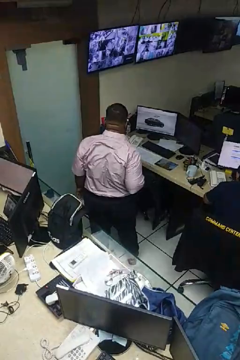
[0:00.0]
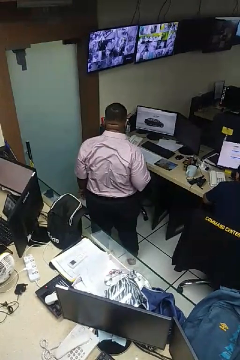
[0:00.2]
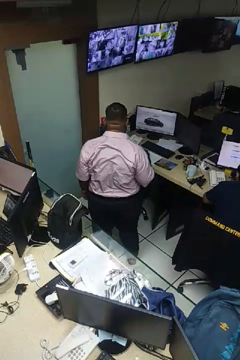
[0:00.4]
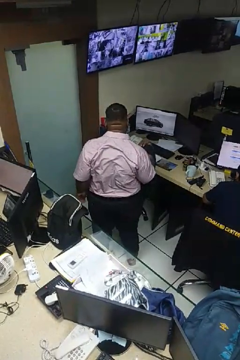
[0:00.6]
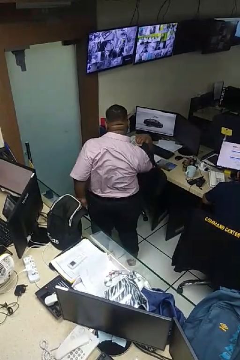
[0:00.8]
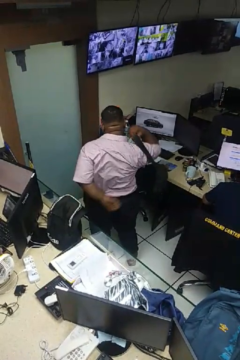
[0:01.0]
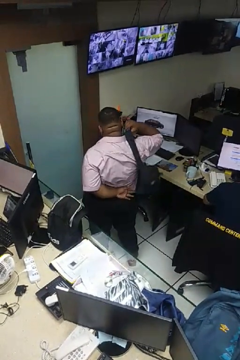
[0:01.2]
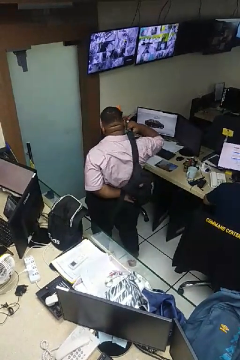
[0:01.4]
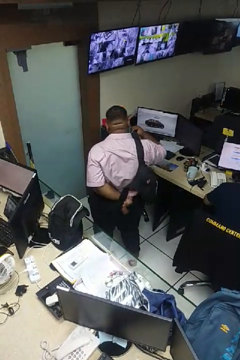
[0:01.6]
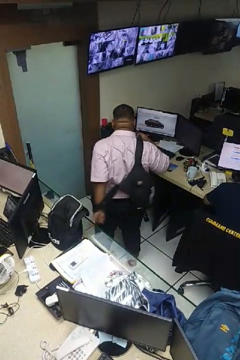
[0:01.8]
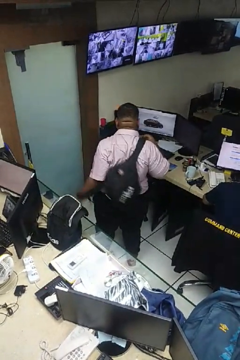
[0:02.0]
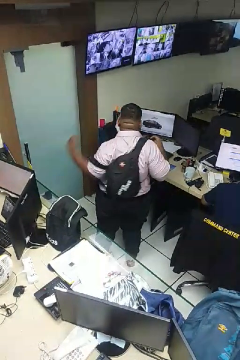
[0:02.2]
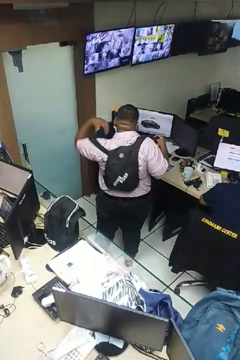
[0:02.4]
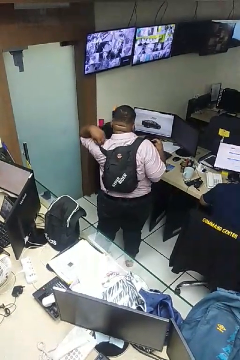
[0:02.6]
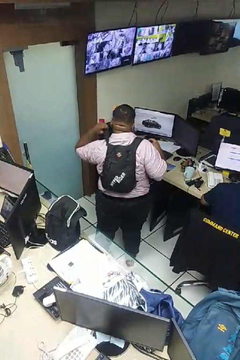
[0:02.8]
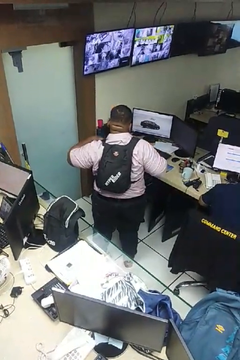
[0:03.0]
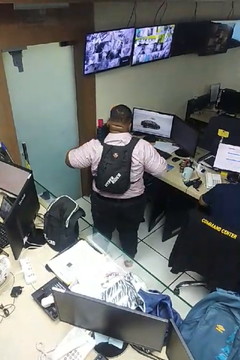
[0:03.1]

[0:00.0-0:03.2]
person puts on backpack

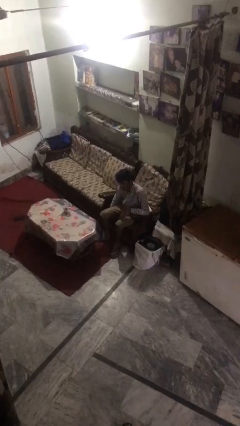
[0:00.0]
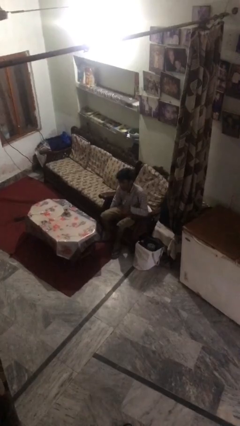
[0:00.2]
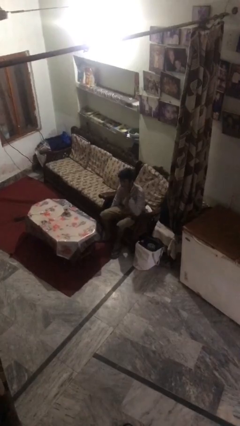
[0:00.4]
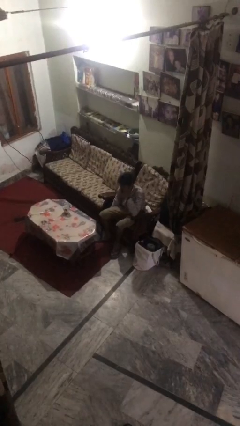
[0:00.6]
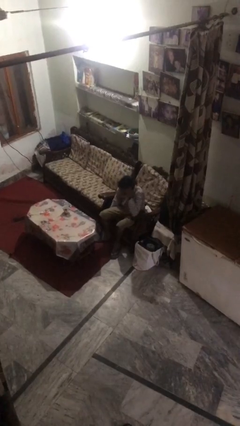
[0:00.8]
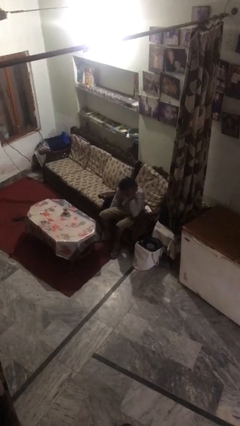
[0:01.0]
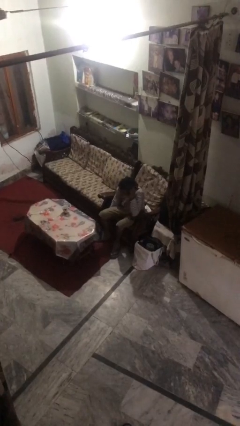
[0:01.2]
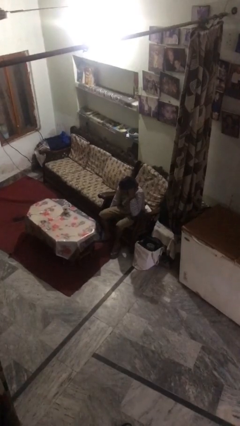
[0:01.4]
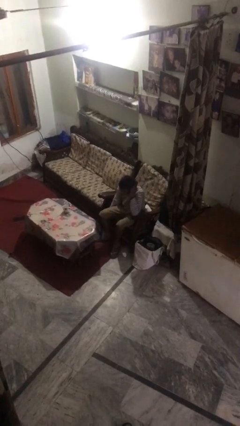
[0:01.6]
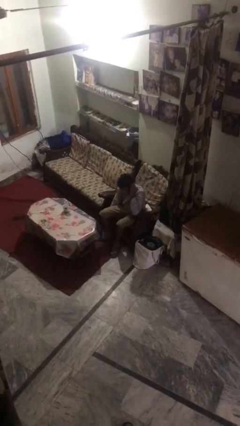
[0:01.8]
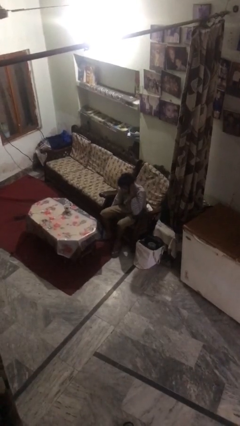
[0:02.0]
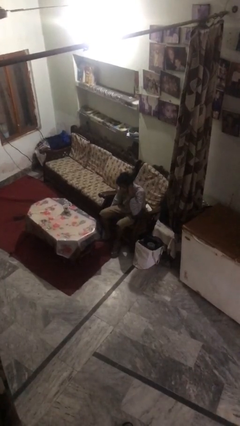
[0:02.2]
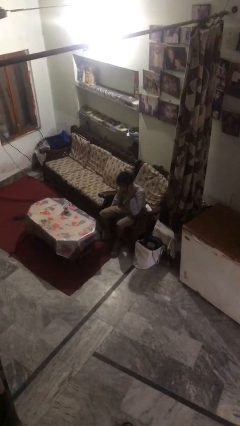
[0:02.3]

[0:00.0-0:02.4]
person strokes hair

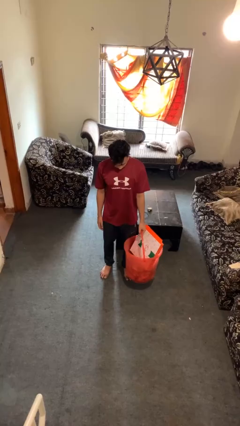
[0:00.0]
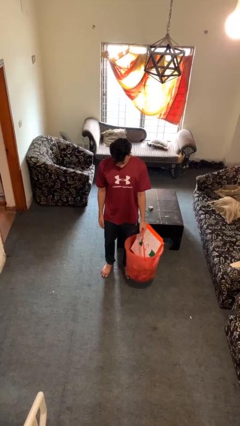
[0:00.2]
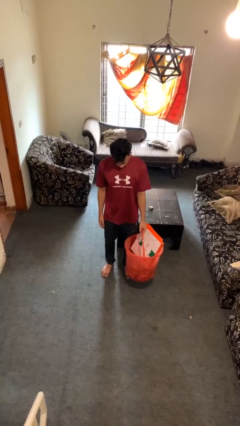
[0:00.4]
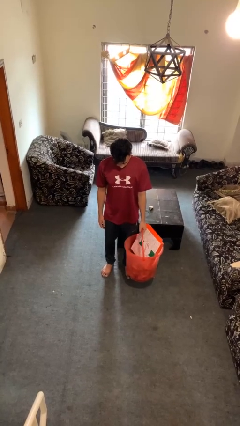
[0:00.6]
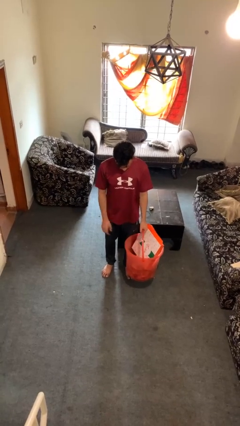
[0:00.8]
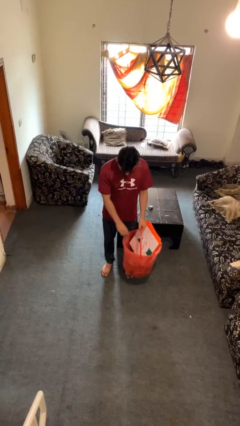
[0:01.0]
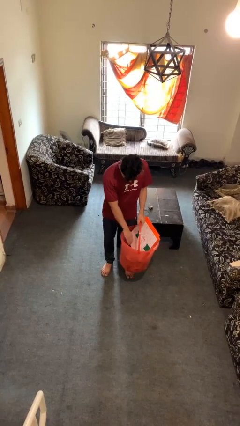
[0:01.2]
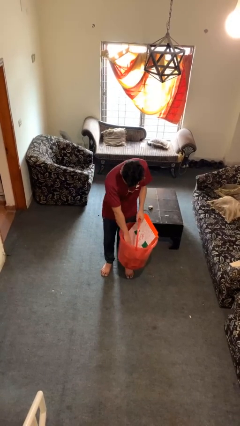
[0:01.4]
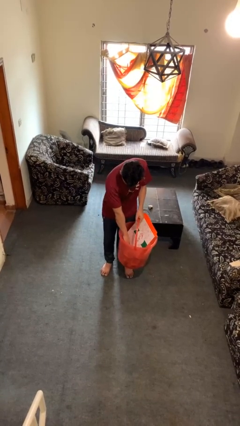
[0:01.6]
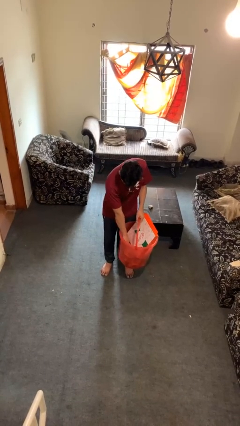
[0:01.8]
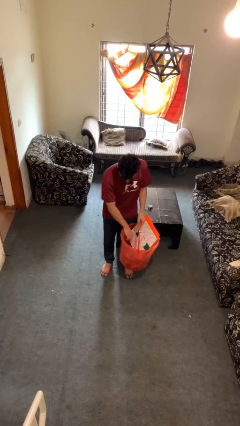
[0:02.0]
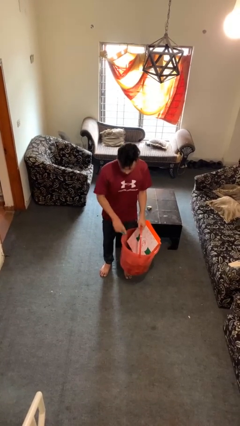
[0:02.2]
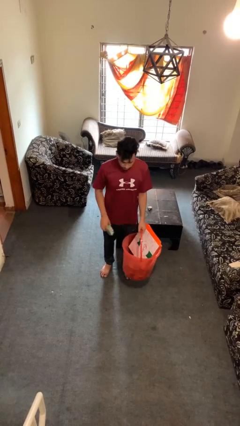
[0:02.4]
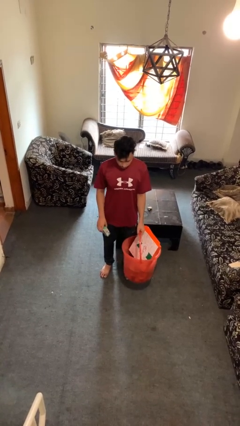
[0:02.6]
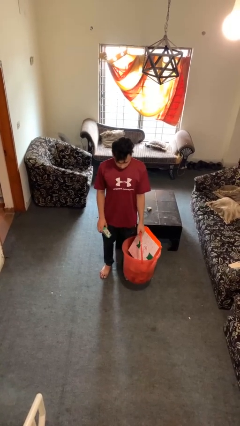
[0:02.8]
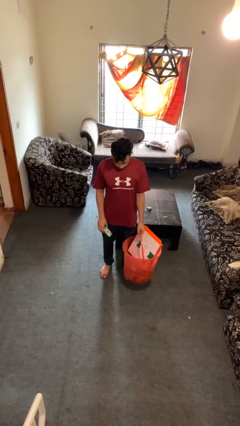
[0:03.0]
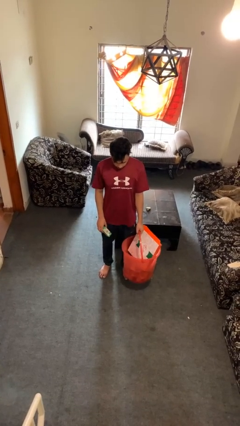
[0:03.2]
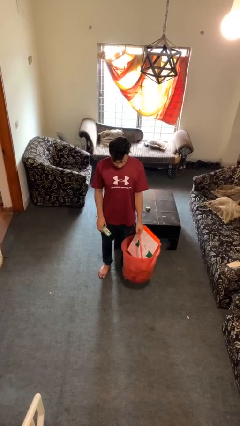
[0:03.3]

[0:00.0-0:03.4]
person takes object from basket

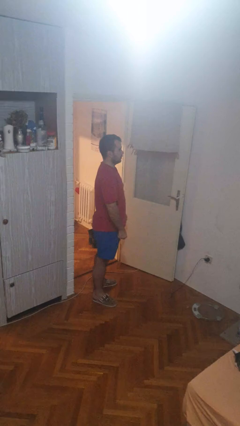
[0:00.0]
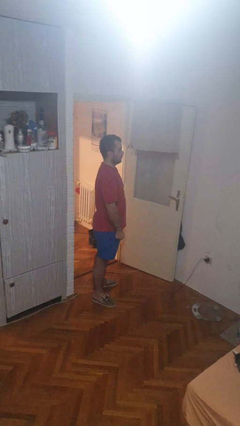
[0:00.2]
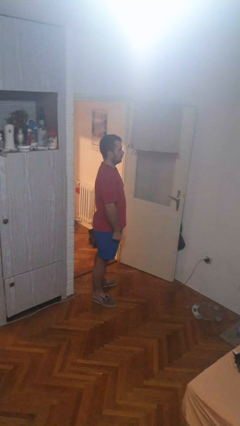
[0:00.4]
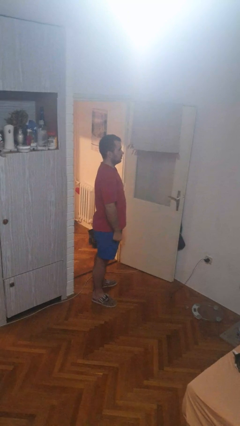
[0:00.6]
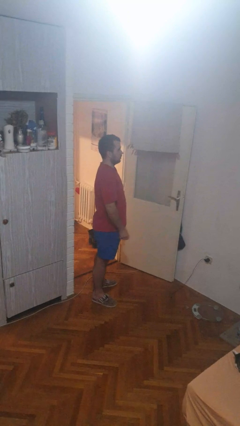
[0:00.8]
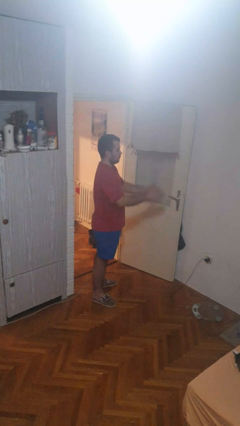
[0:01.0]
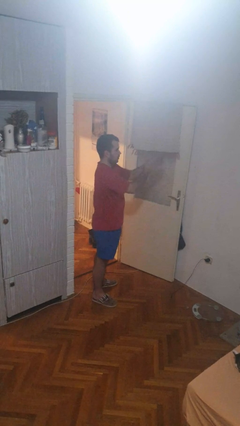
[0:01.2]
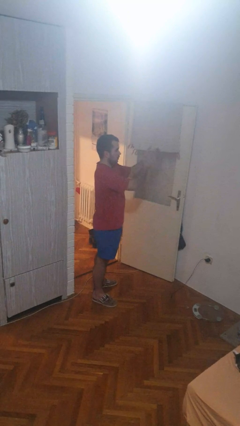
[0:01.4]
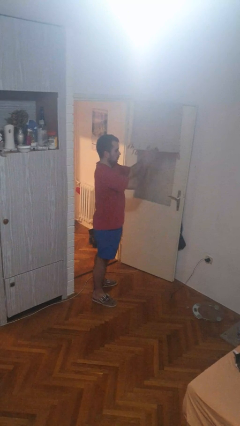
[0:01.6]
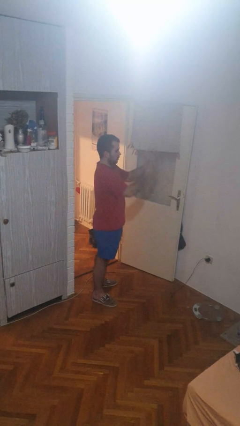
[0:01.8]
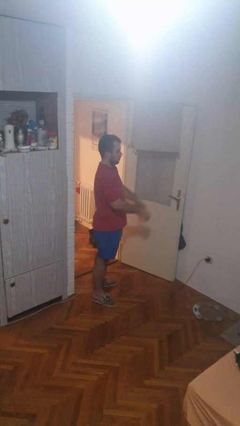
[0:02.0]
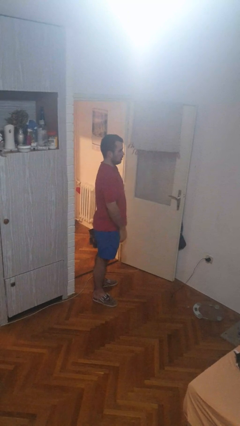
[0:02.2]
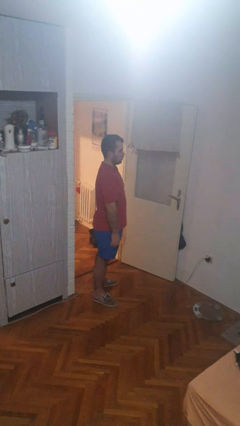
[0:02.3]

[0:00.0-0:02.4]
person claps hands

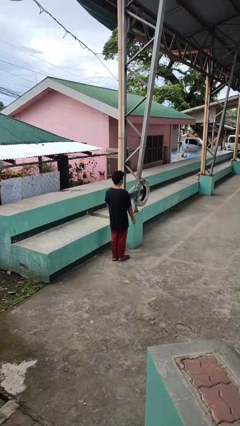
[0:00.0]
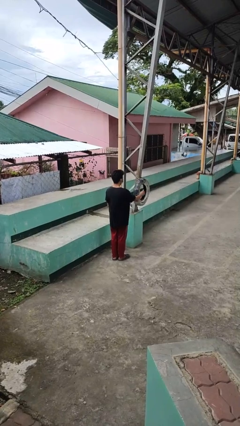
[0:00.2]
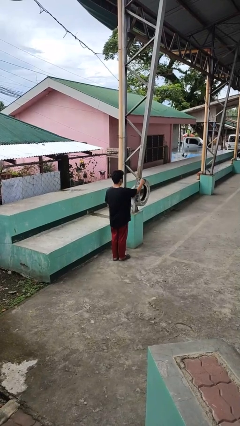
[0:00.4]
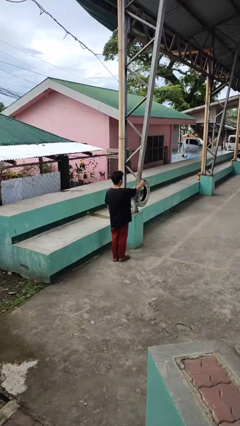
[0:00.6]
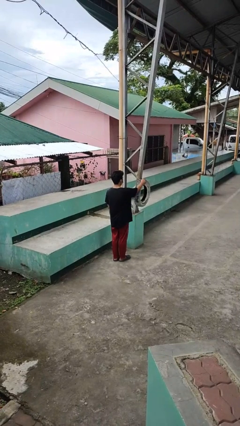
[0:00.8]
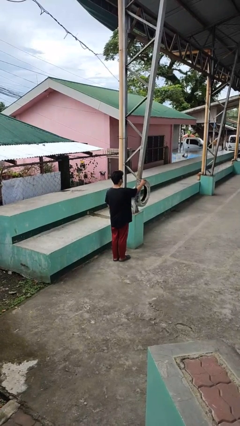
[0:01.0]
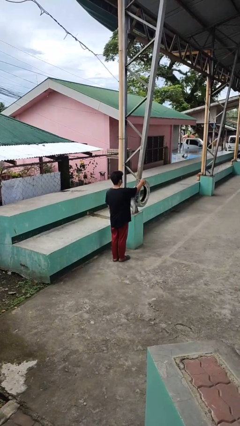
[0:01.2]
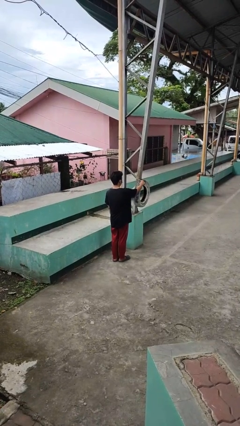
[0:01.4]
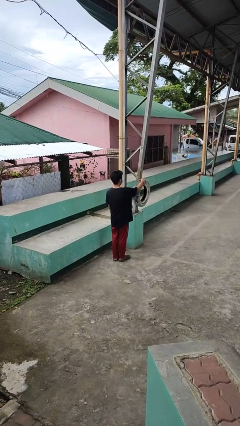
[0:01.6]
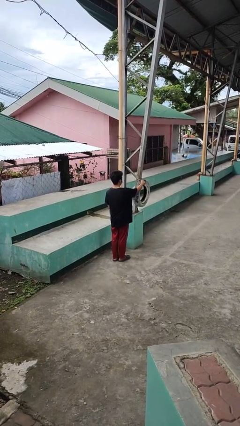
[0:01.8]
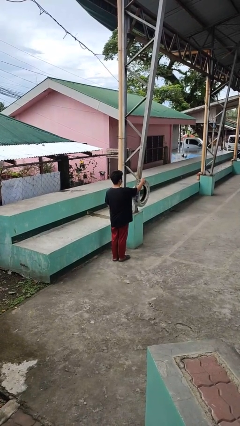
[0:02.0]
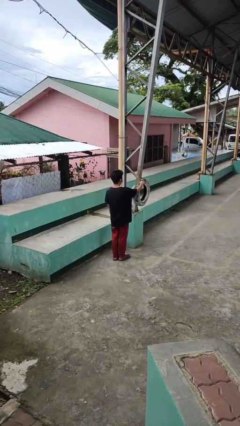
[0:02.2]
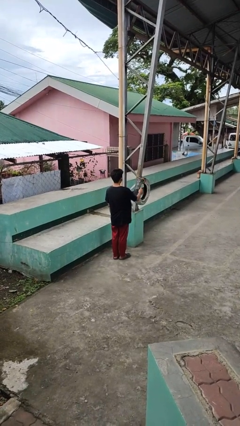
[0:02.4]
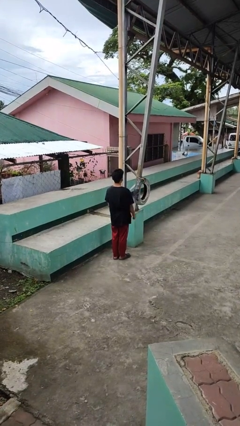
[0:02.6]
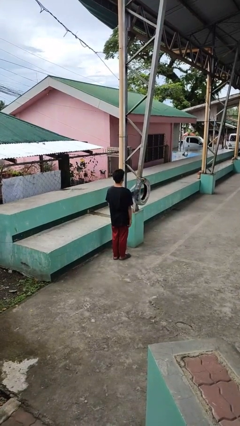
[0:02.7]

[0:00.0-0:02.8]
person taps object with finger

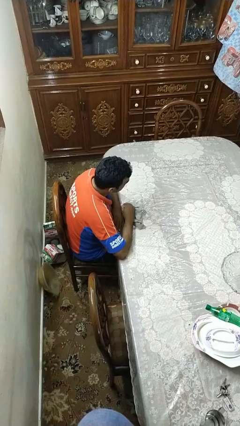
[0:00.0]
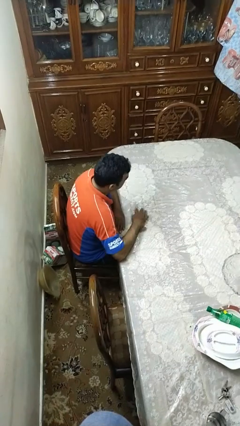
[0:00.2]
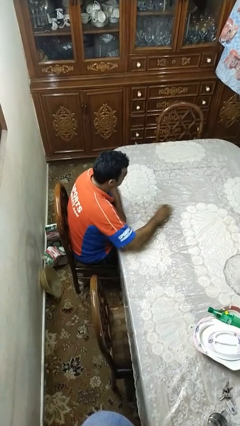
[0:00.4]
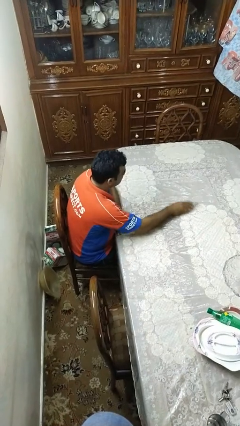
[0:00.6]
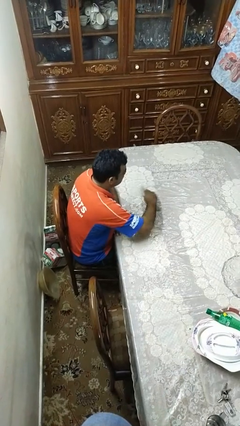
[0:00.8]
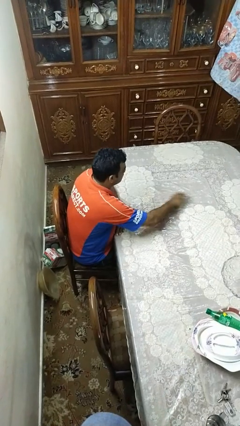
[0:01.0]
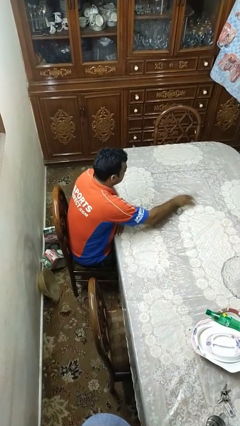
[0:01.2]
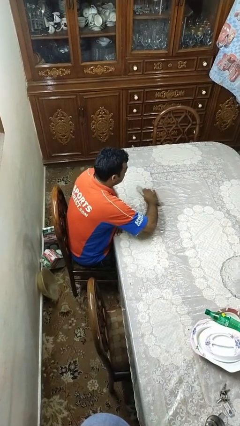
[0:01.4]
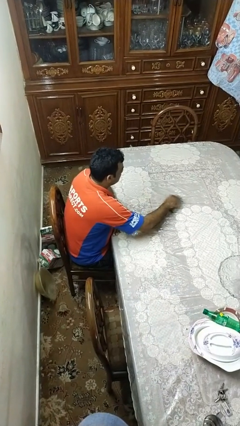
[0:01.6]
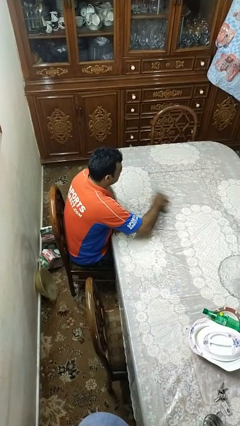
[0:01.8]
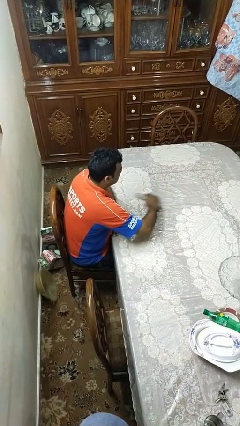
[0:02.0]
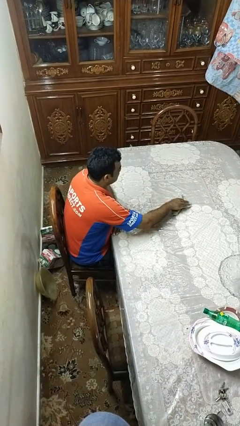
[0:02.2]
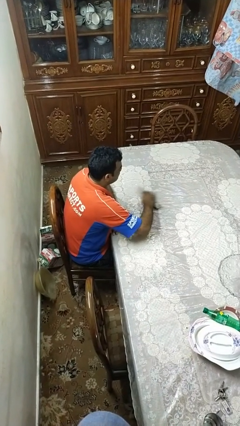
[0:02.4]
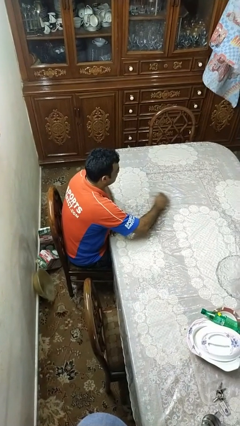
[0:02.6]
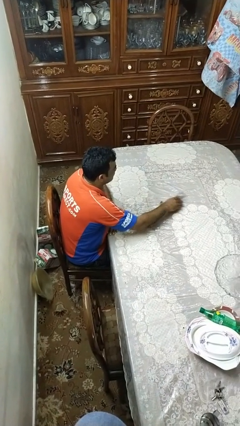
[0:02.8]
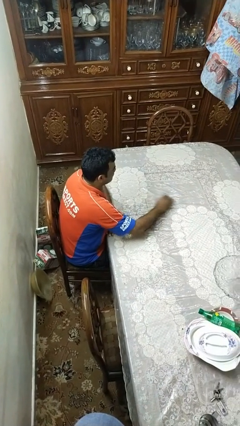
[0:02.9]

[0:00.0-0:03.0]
person cleans table with rag

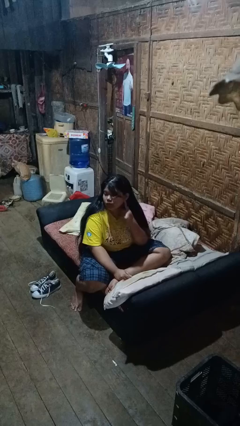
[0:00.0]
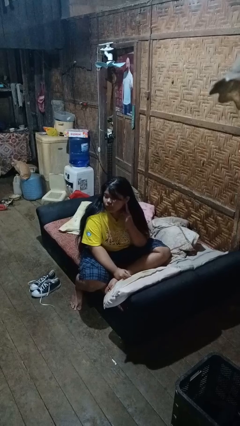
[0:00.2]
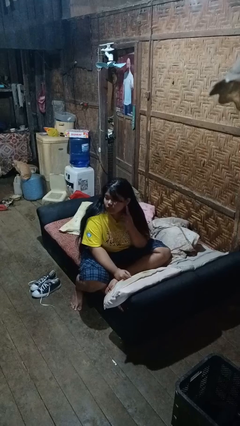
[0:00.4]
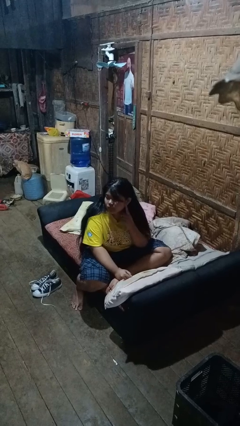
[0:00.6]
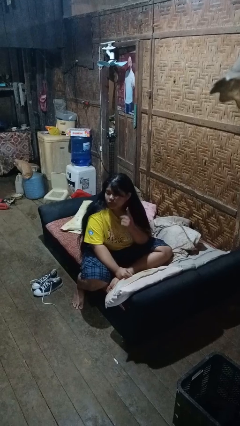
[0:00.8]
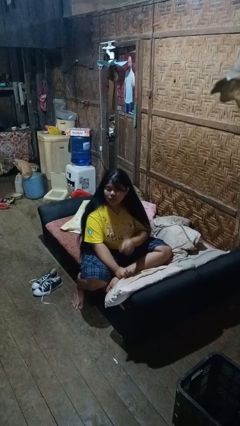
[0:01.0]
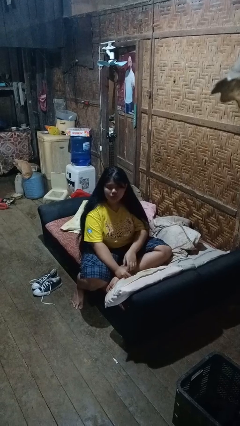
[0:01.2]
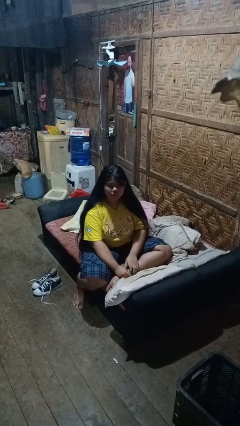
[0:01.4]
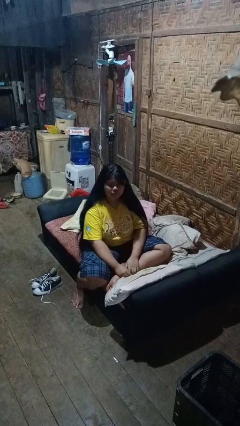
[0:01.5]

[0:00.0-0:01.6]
person gestures listen closely
